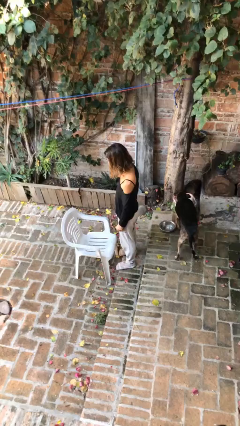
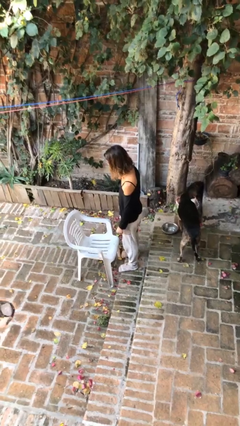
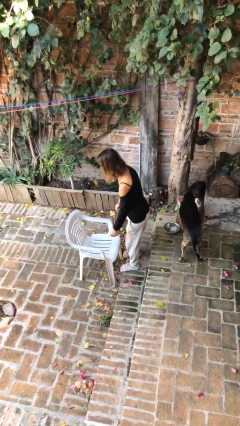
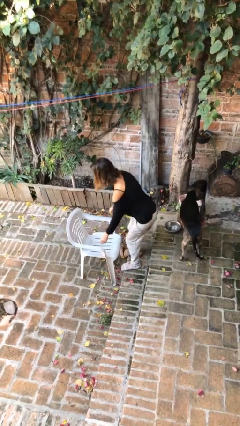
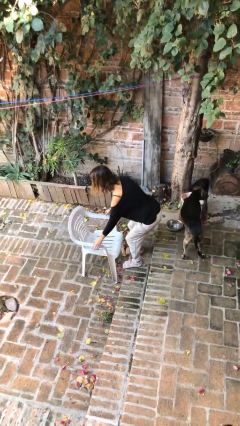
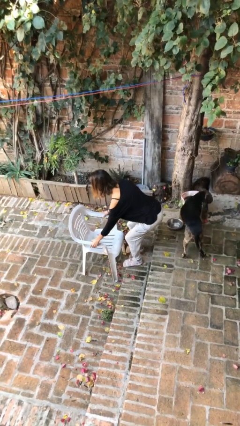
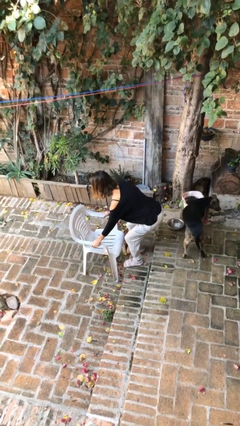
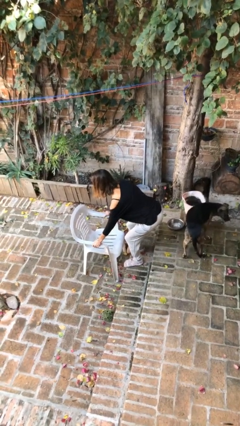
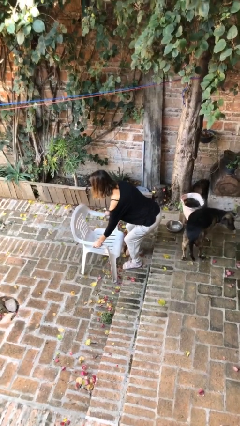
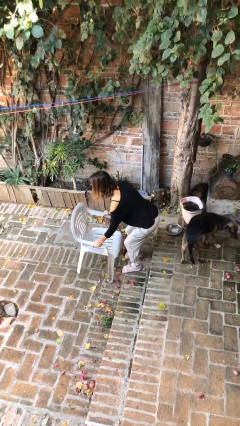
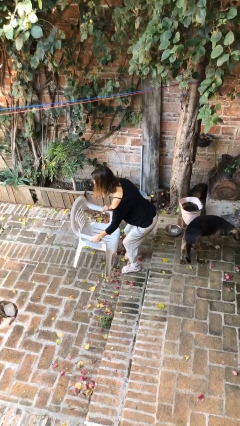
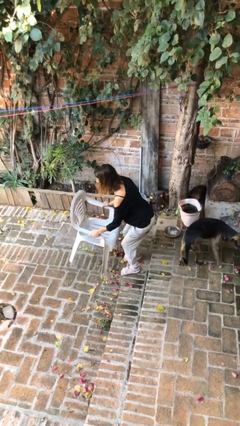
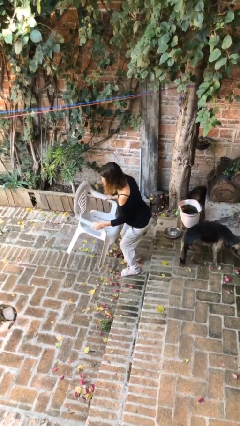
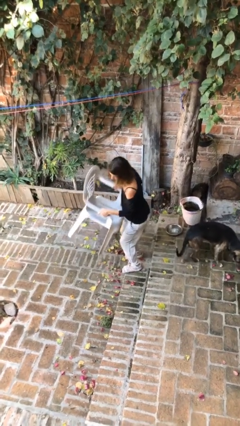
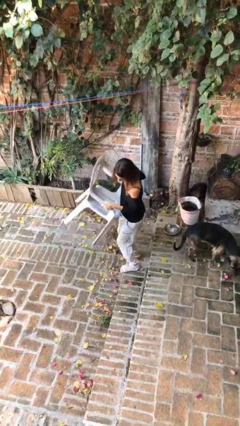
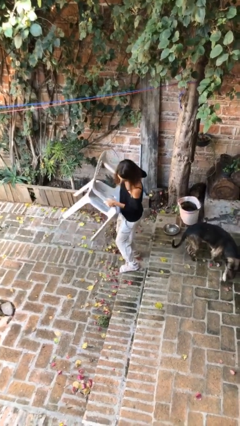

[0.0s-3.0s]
person picks up object from floor

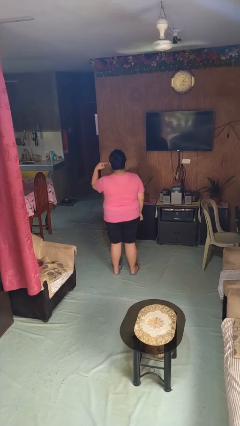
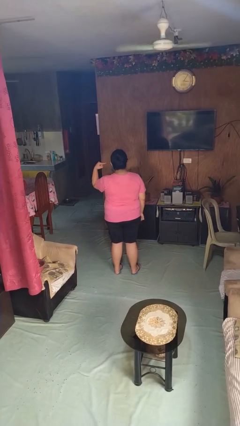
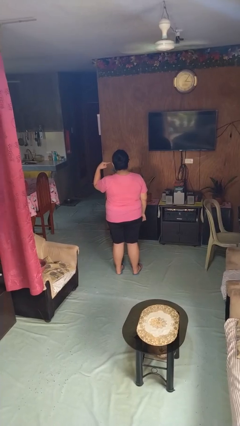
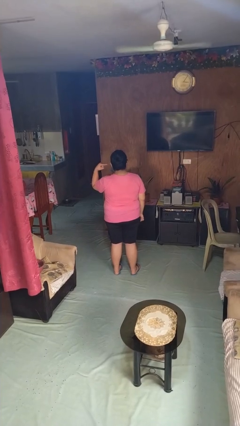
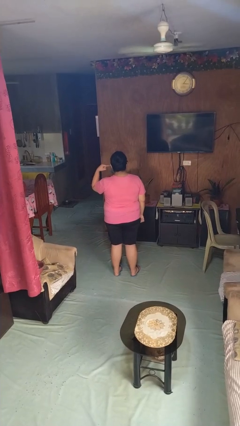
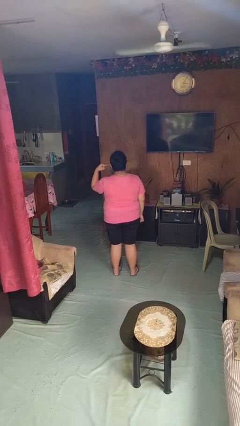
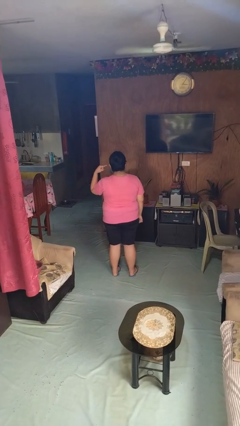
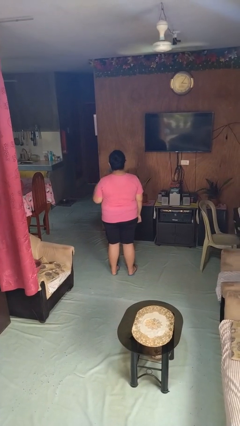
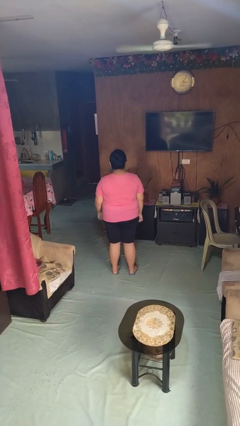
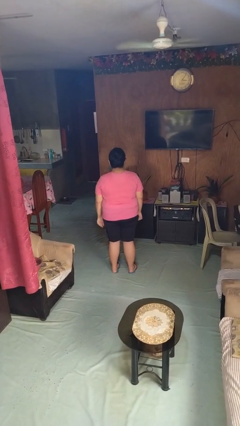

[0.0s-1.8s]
person gestures listen closely

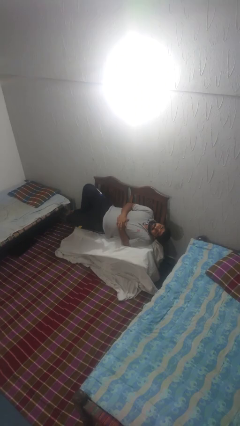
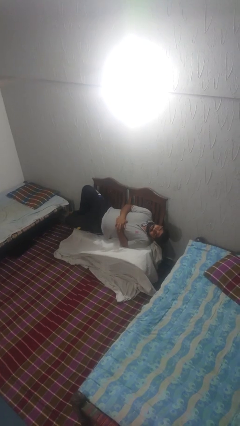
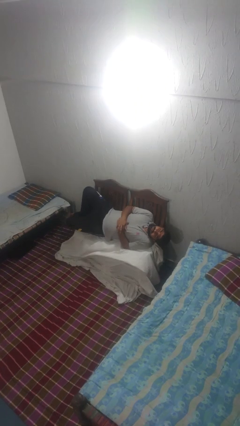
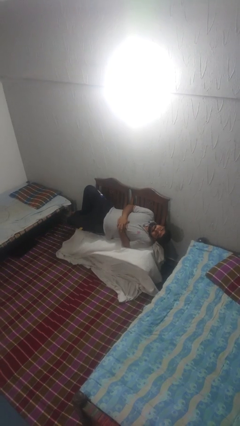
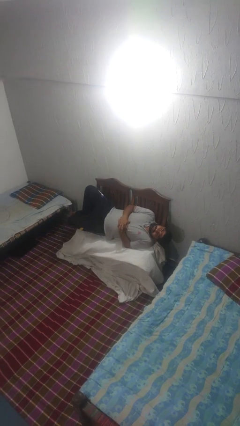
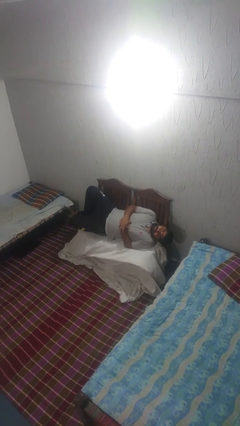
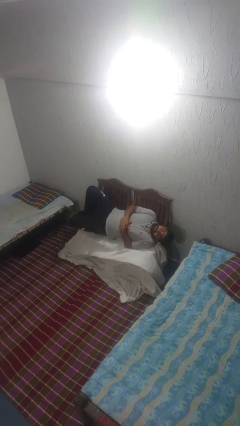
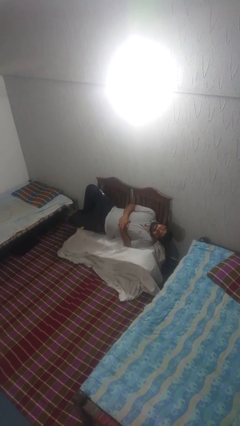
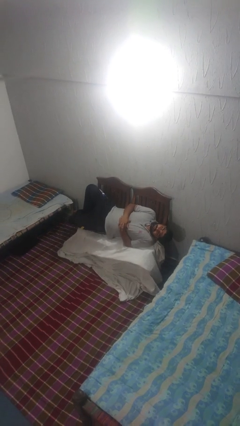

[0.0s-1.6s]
person stands up

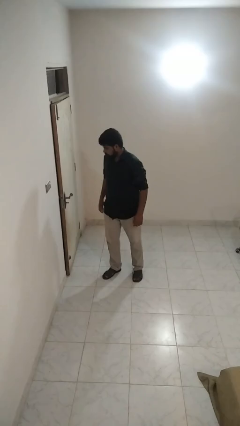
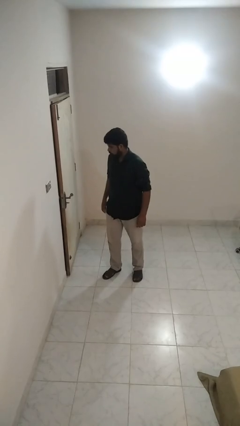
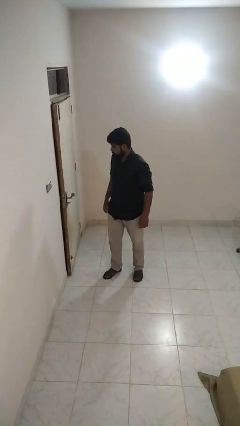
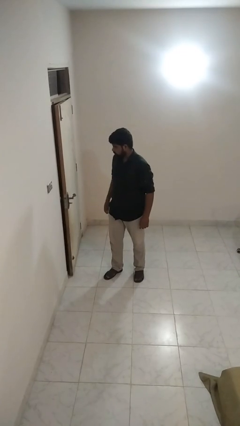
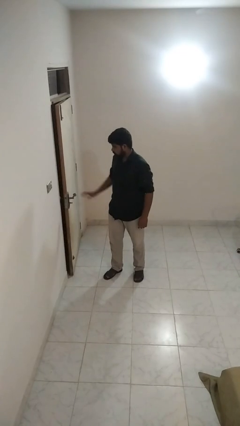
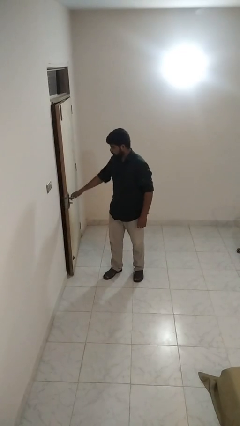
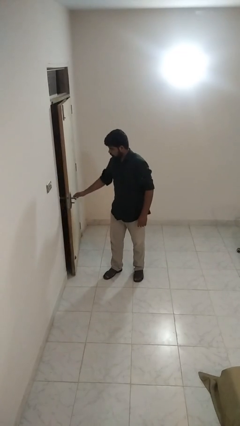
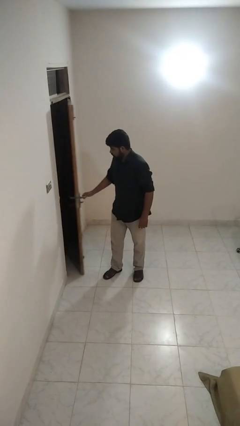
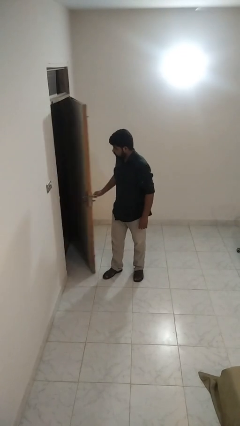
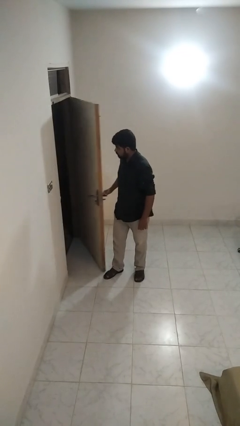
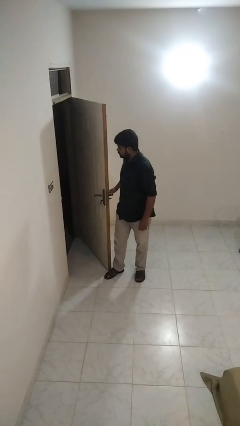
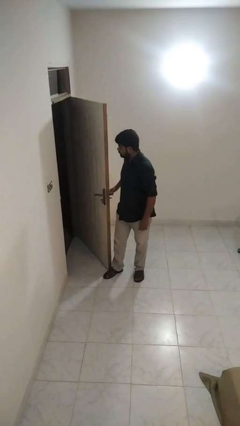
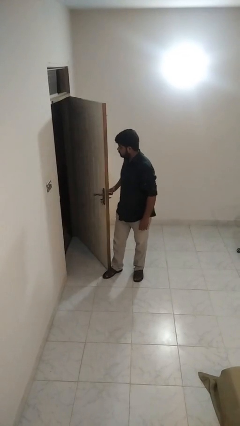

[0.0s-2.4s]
person opens facility door

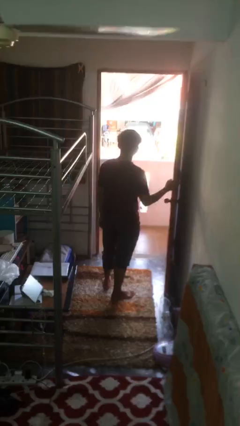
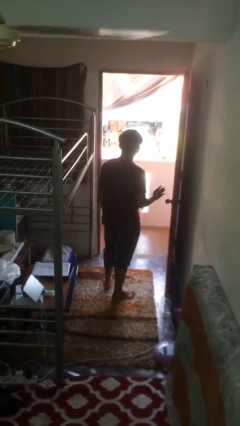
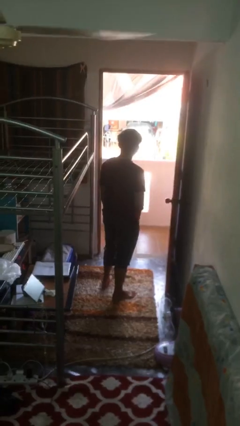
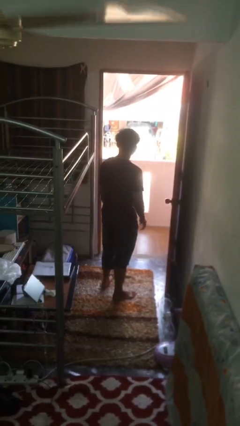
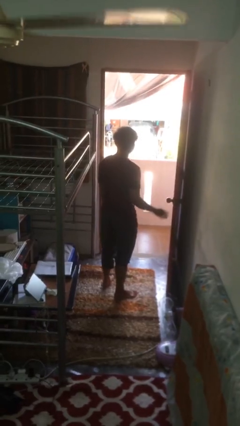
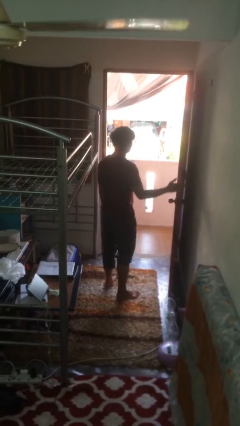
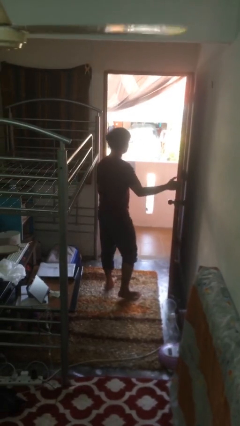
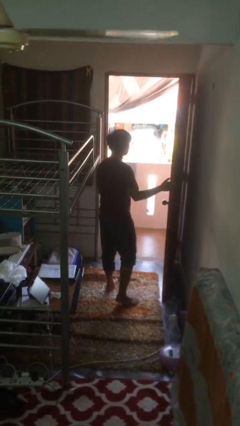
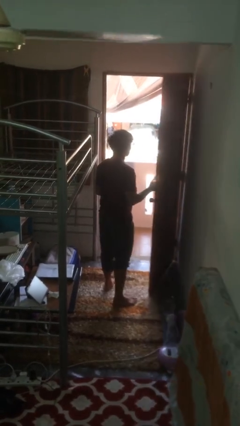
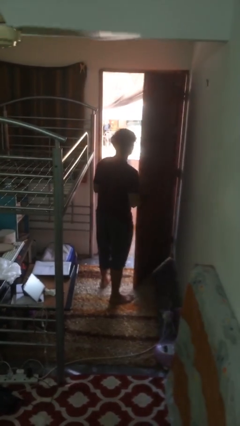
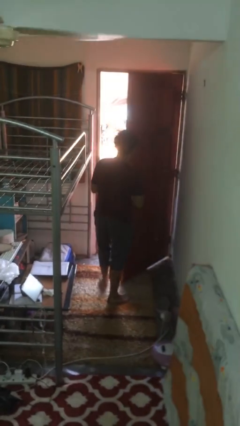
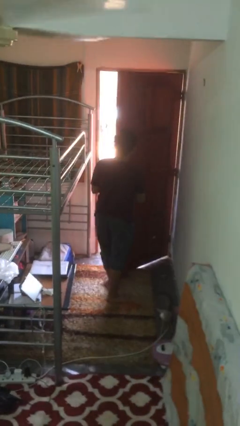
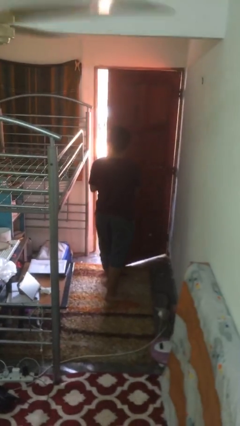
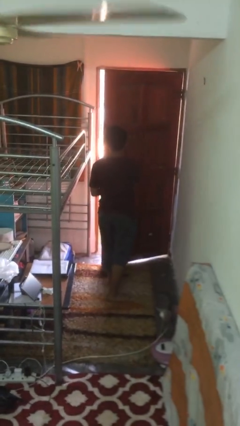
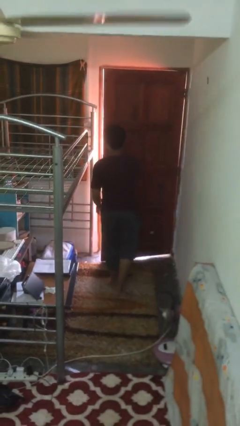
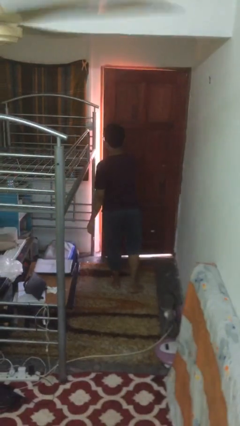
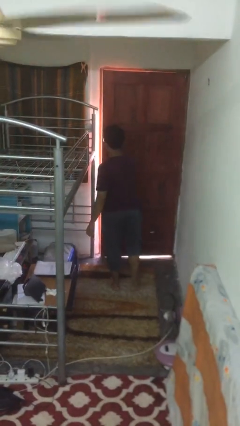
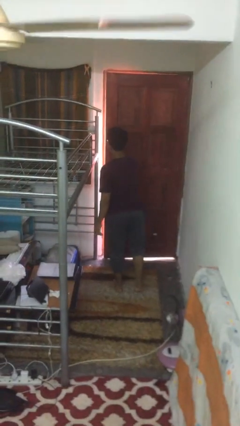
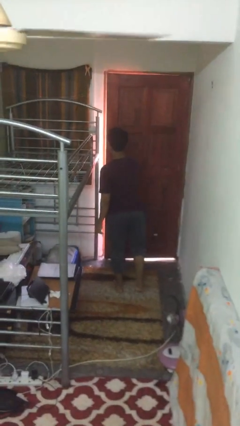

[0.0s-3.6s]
person closes facility door

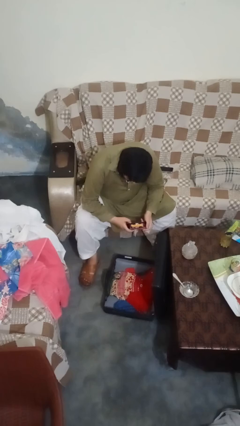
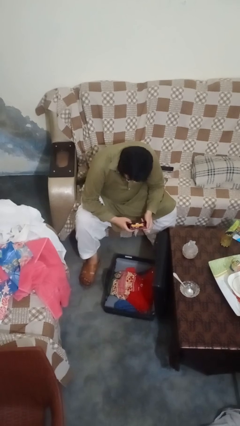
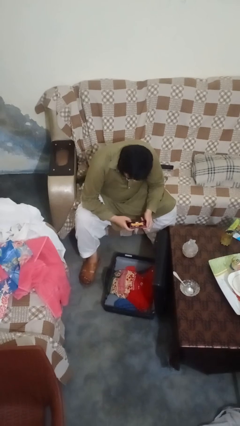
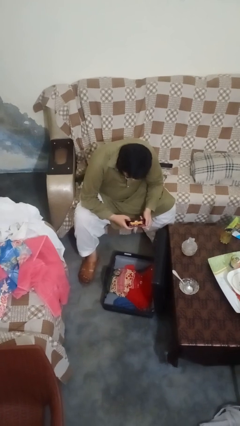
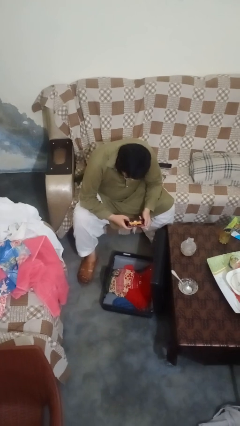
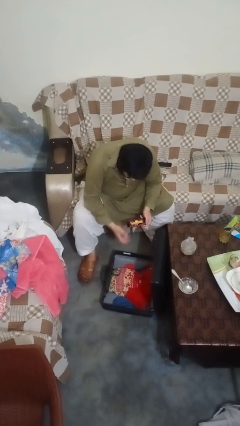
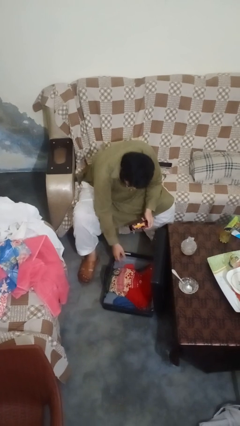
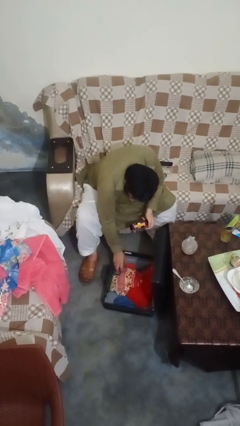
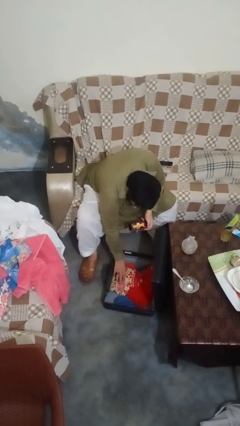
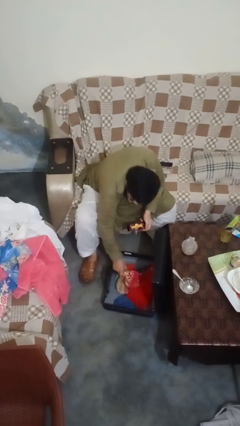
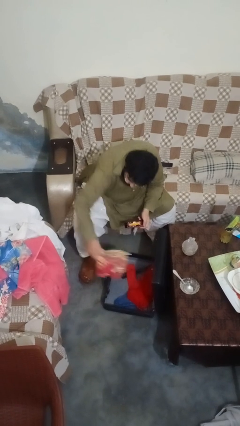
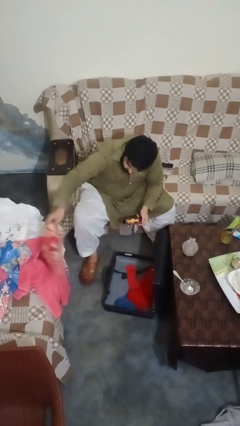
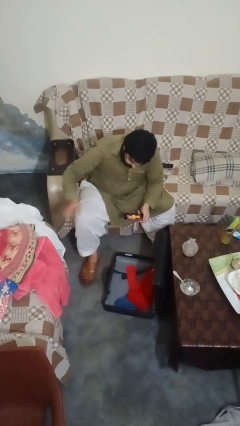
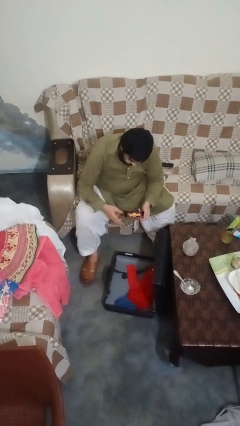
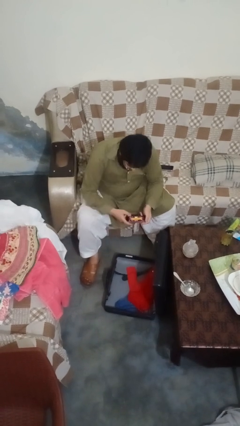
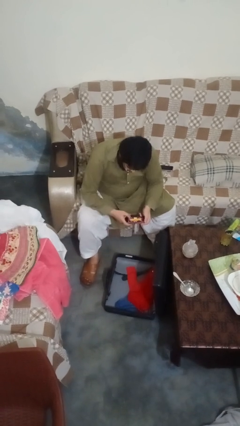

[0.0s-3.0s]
person unloads clothes from suitcase

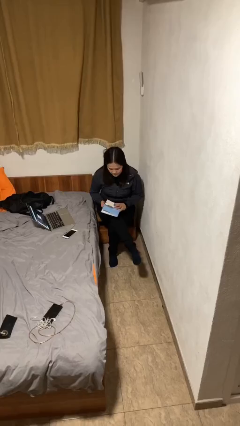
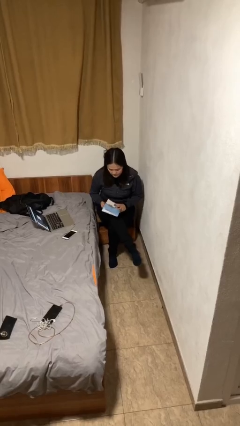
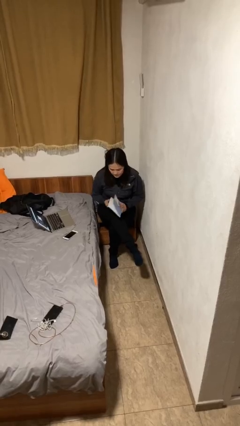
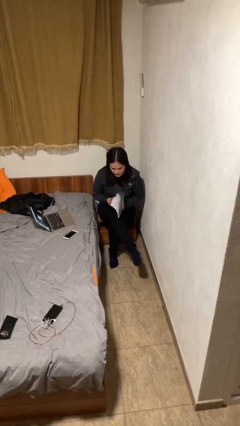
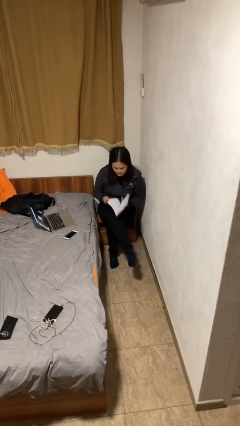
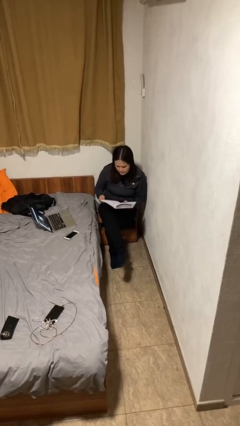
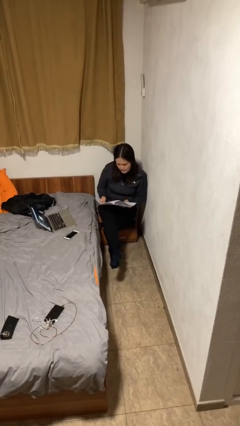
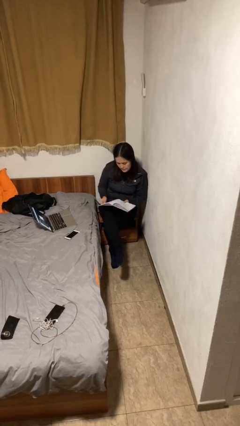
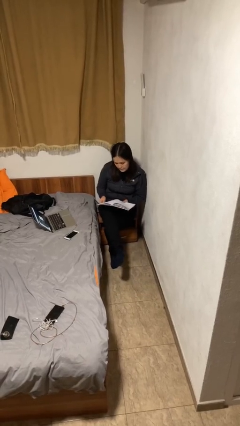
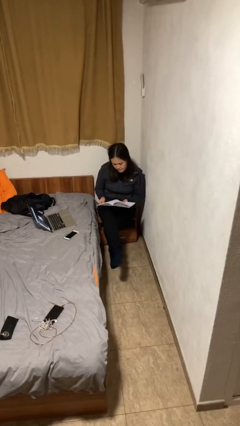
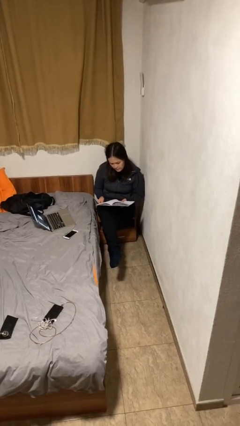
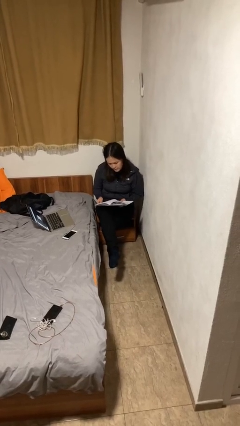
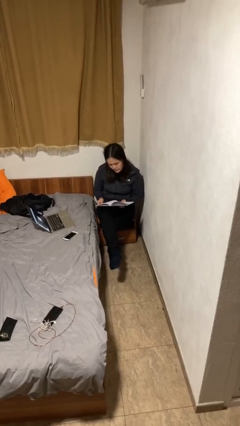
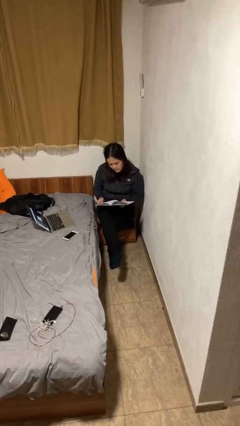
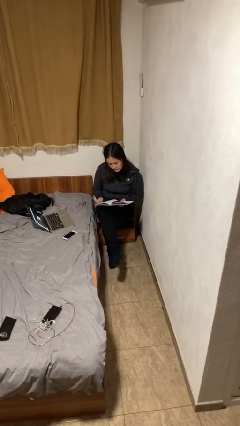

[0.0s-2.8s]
person reads document
